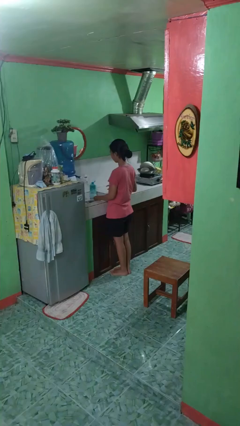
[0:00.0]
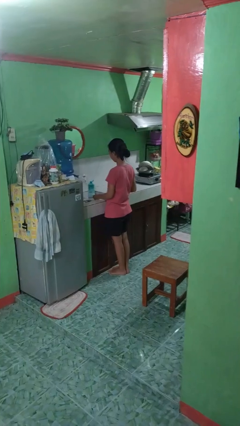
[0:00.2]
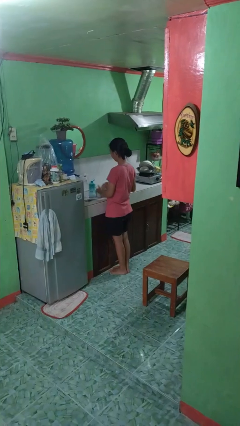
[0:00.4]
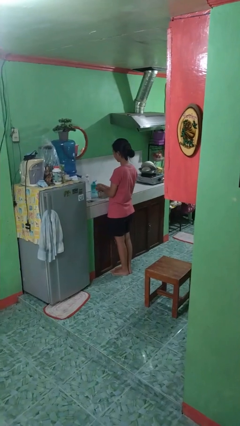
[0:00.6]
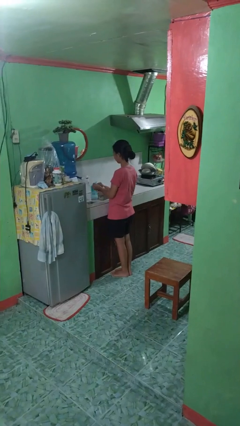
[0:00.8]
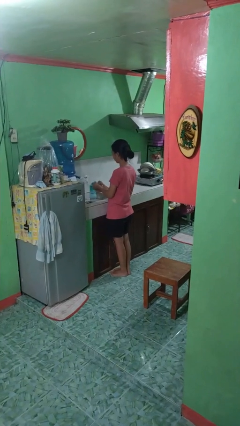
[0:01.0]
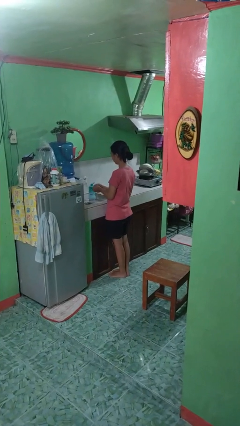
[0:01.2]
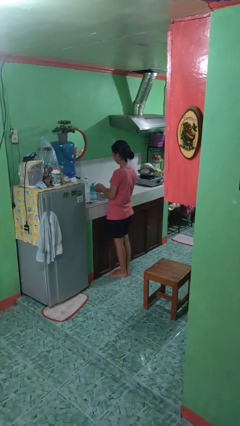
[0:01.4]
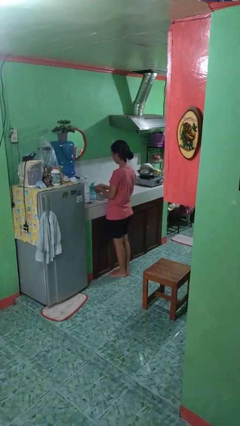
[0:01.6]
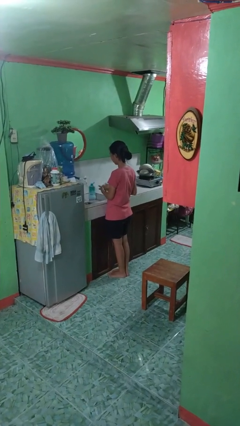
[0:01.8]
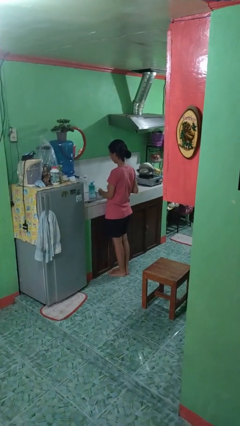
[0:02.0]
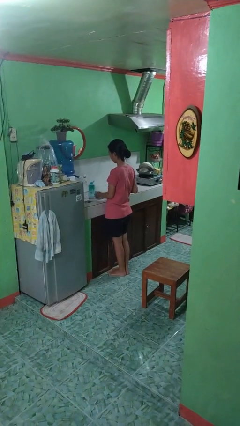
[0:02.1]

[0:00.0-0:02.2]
person dries hands with towel

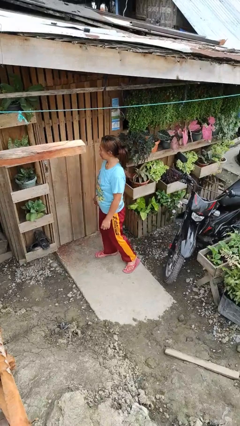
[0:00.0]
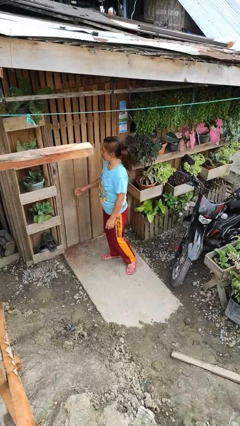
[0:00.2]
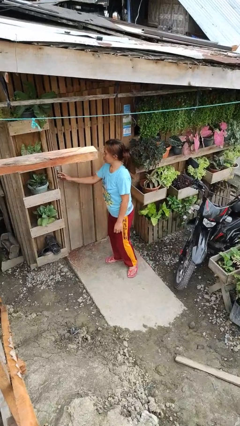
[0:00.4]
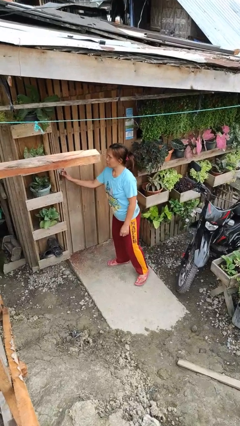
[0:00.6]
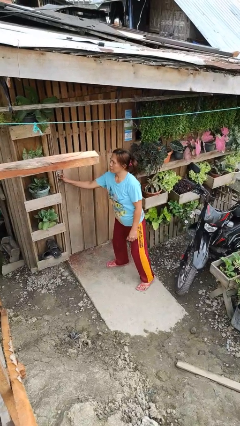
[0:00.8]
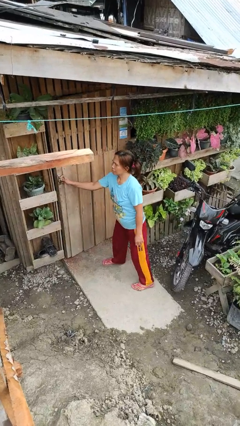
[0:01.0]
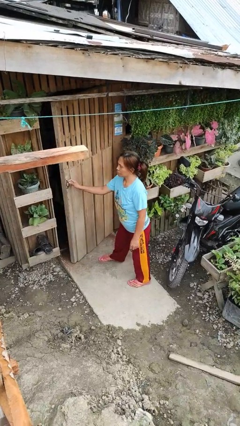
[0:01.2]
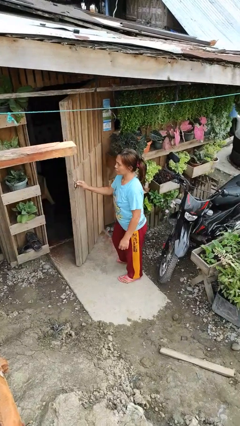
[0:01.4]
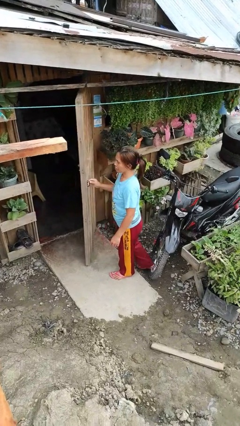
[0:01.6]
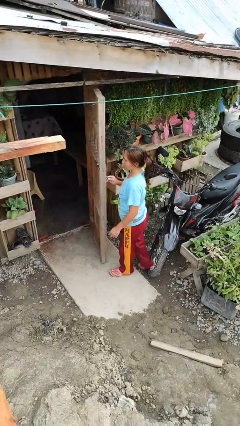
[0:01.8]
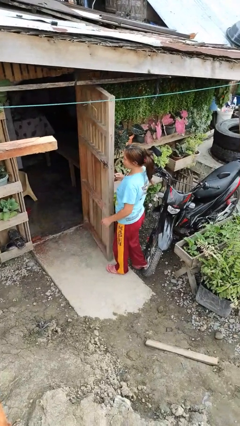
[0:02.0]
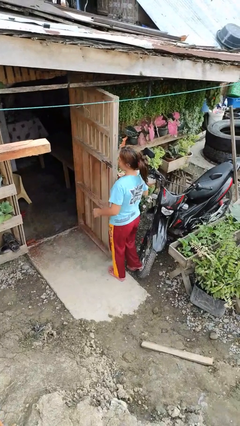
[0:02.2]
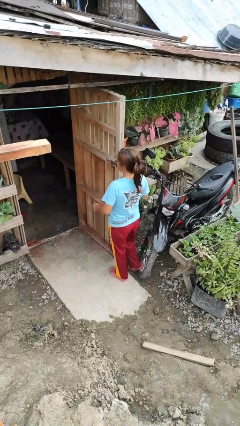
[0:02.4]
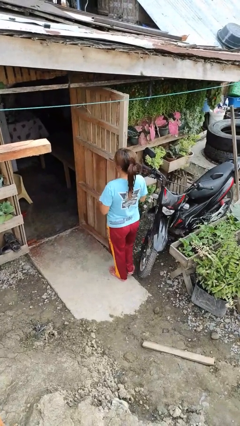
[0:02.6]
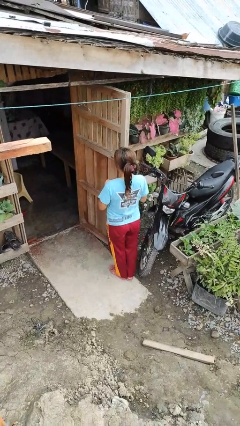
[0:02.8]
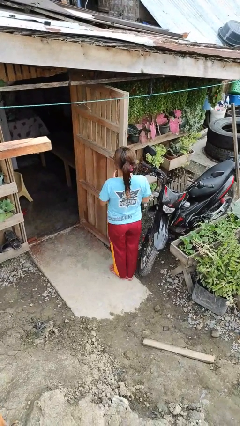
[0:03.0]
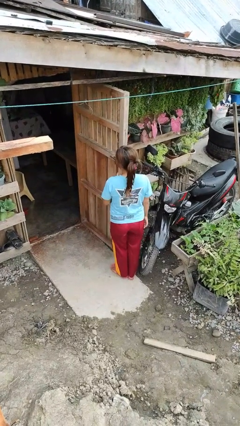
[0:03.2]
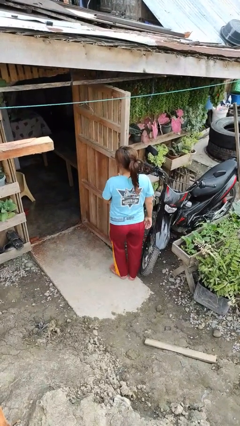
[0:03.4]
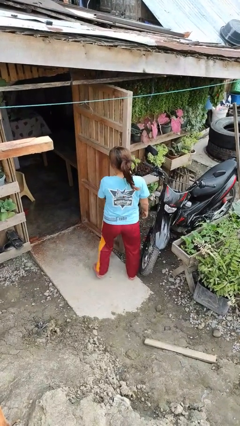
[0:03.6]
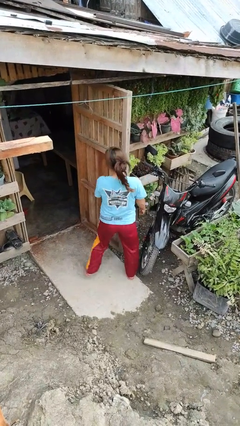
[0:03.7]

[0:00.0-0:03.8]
person opens facility door

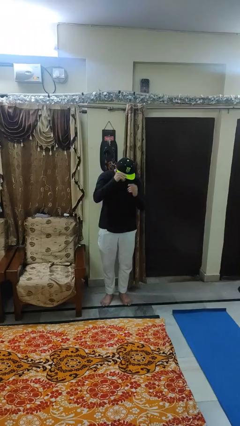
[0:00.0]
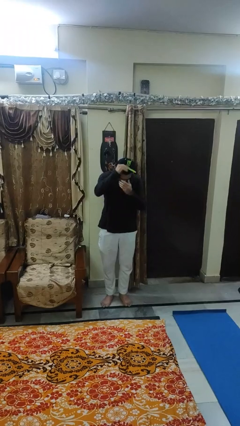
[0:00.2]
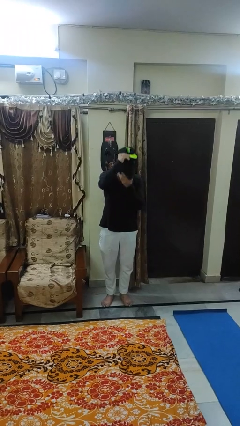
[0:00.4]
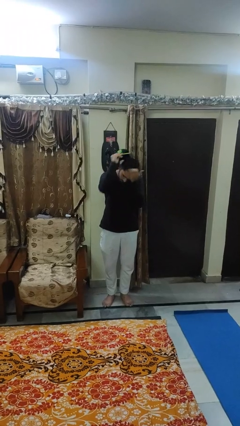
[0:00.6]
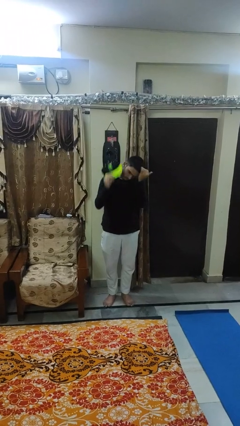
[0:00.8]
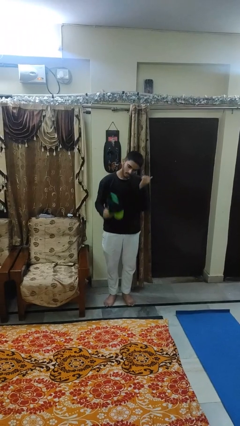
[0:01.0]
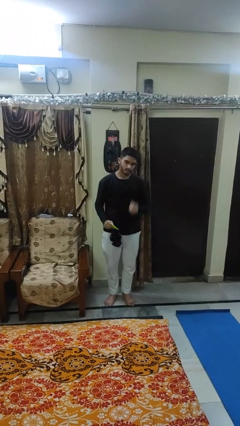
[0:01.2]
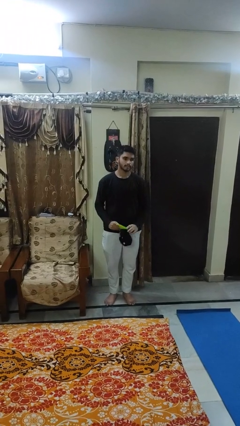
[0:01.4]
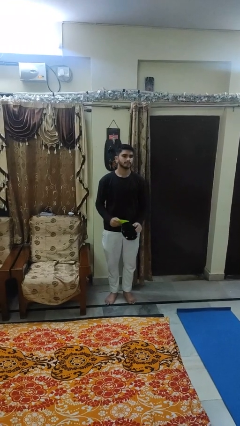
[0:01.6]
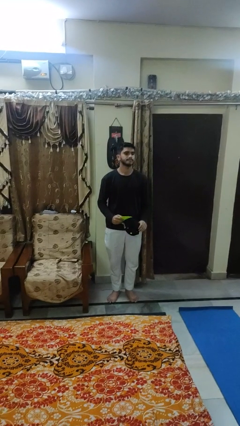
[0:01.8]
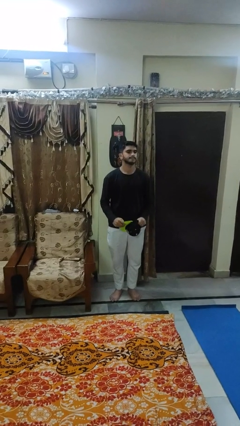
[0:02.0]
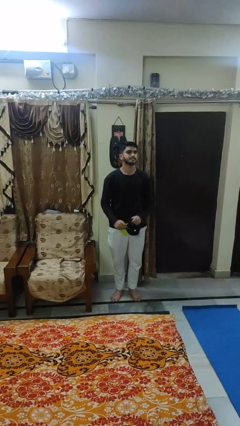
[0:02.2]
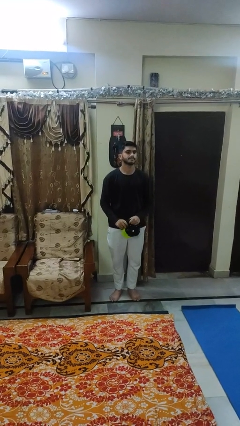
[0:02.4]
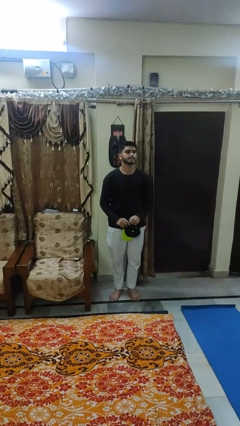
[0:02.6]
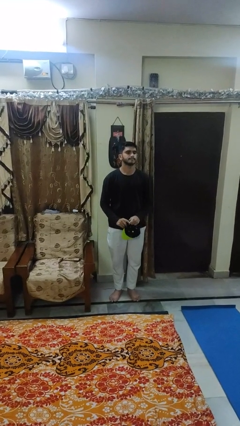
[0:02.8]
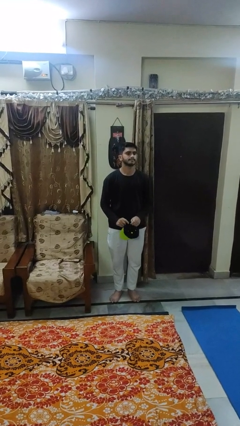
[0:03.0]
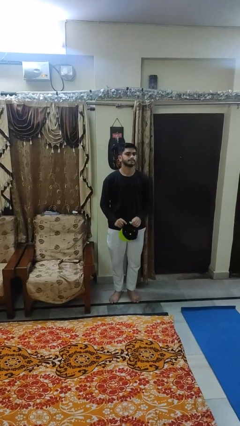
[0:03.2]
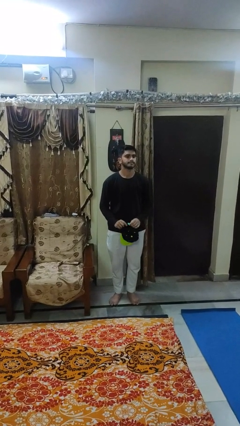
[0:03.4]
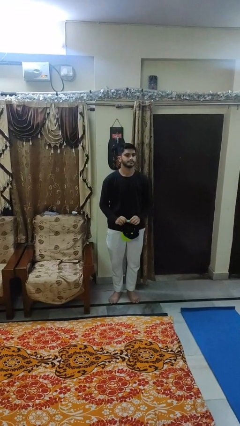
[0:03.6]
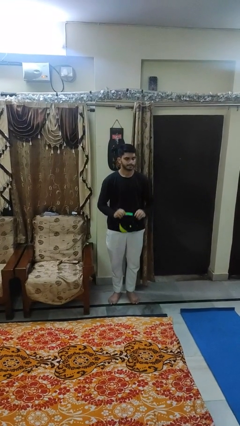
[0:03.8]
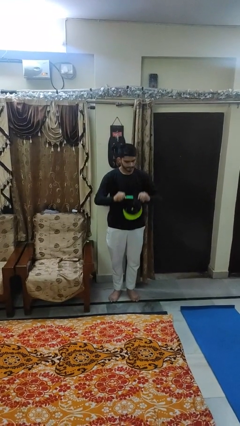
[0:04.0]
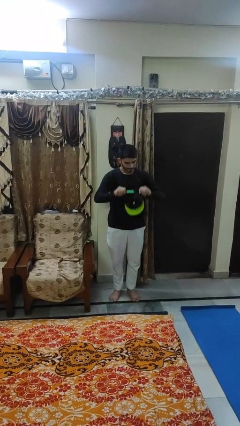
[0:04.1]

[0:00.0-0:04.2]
person takes off hat

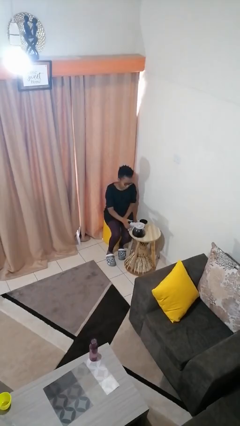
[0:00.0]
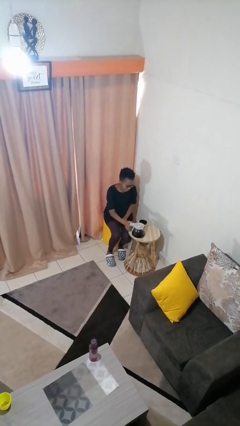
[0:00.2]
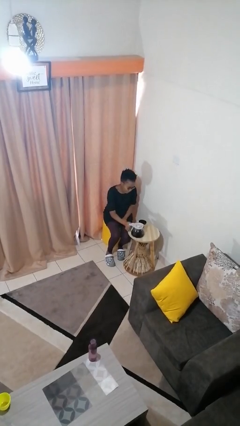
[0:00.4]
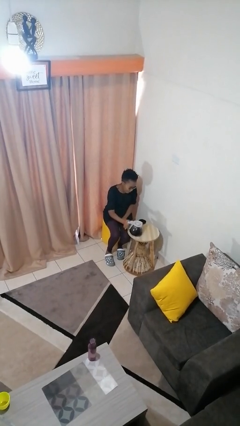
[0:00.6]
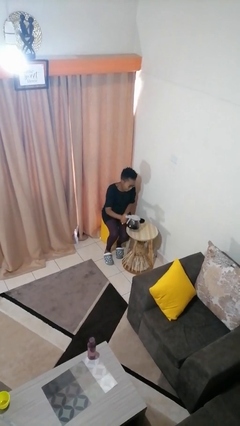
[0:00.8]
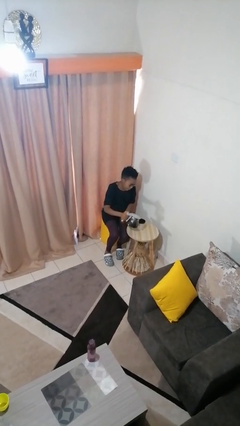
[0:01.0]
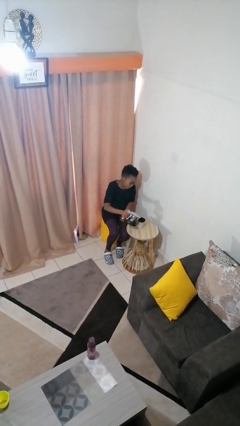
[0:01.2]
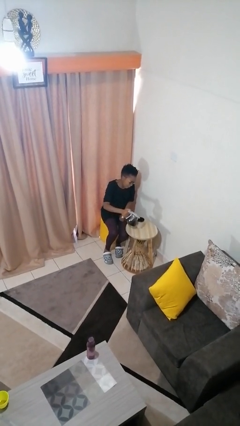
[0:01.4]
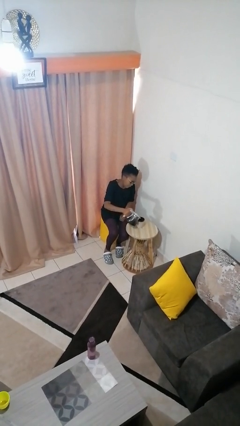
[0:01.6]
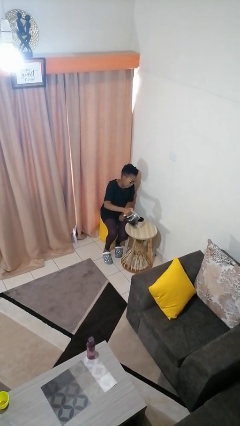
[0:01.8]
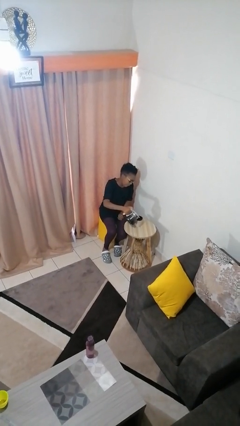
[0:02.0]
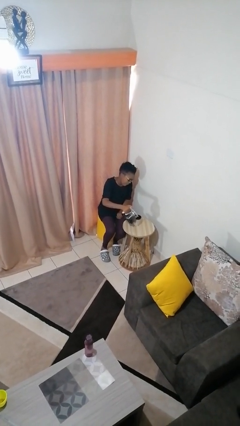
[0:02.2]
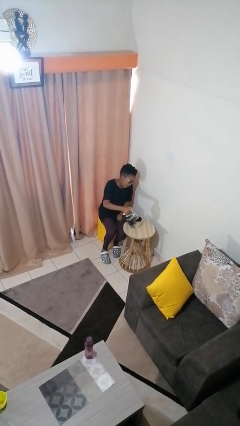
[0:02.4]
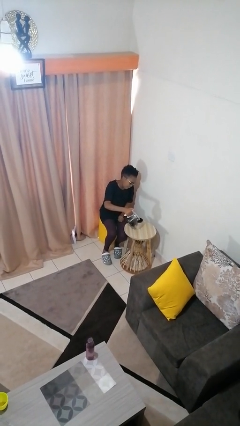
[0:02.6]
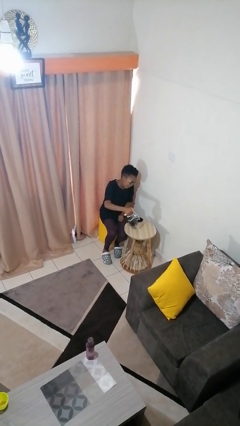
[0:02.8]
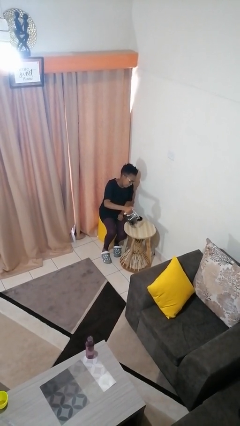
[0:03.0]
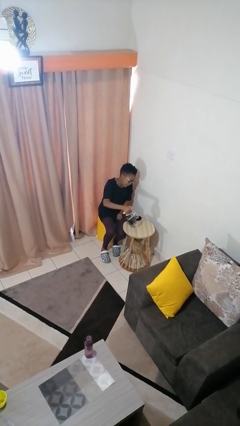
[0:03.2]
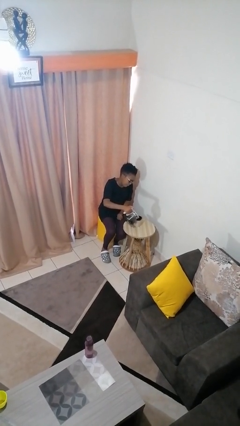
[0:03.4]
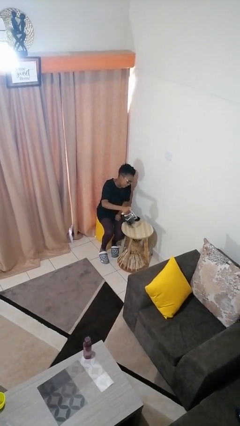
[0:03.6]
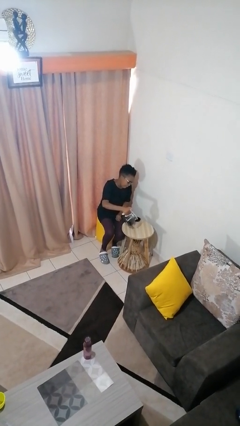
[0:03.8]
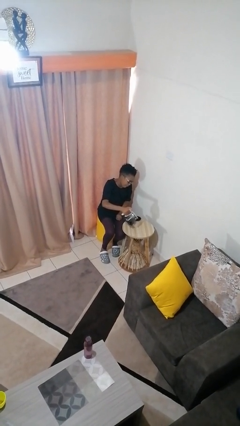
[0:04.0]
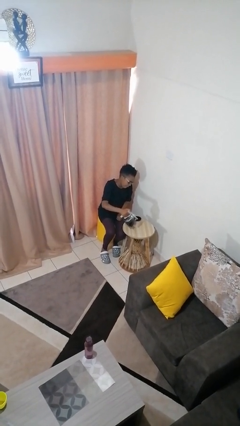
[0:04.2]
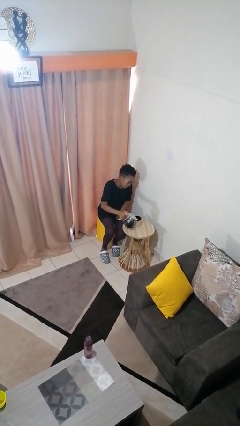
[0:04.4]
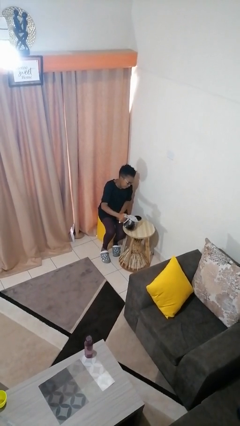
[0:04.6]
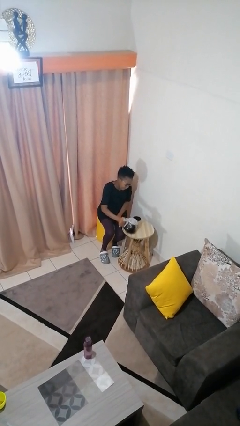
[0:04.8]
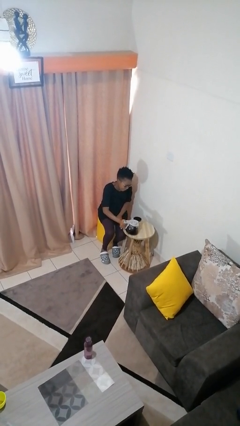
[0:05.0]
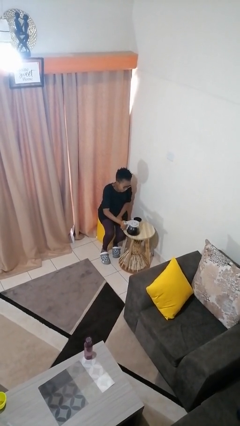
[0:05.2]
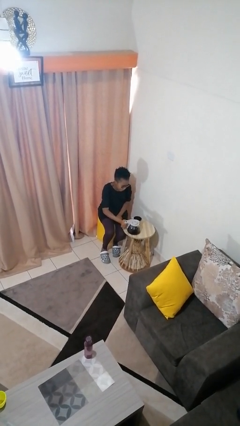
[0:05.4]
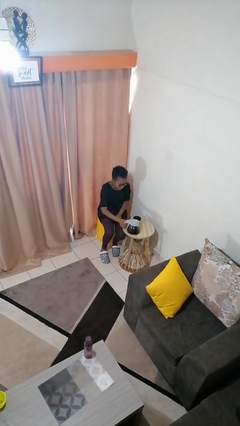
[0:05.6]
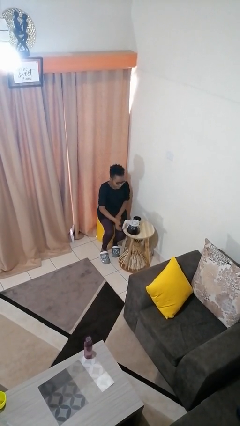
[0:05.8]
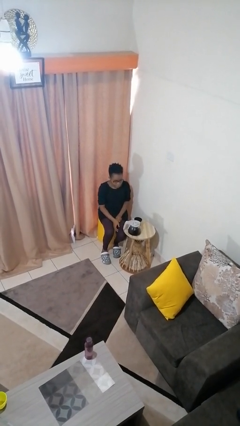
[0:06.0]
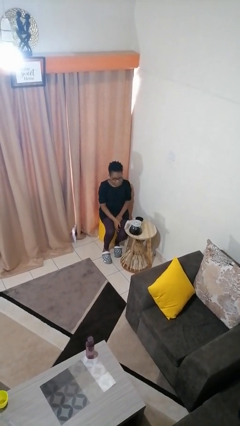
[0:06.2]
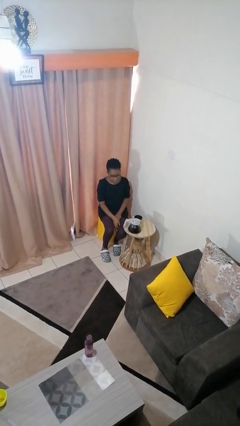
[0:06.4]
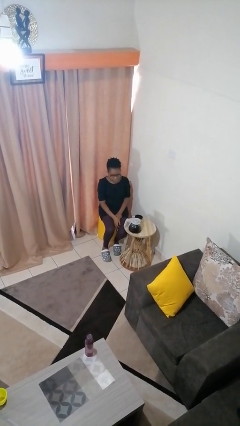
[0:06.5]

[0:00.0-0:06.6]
person pours coffee into mug

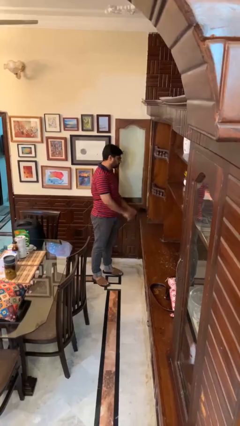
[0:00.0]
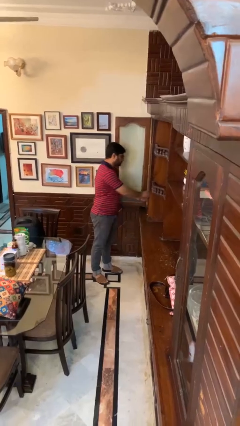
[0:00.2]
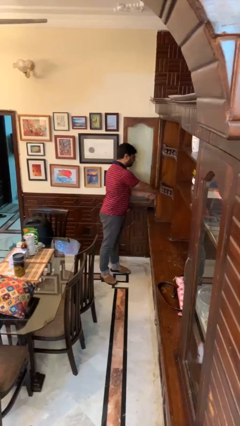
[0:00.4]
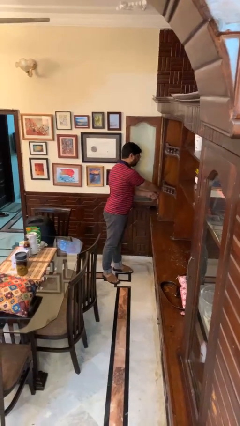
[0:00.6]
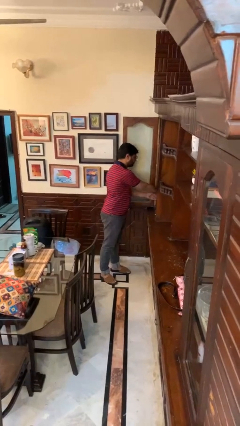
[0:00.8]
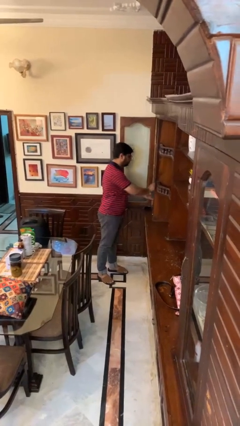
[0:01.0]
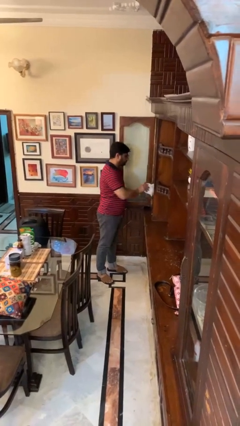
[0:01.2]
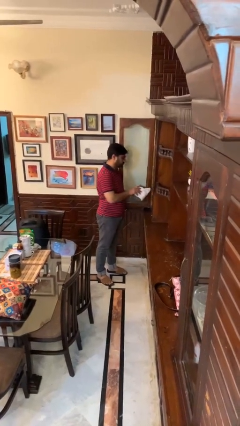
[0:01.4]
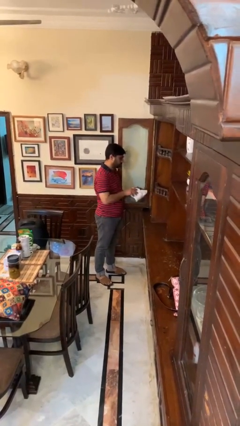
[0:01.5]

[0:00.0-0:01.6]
person takes clothes from dresser
